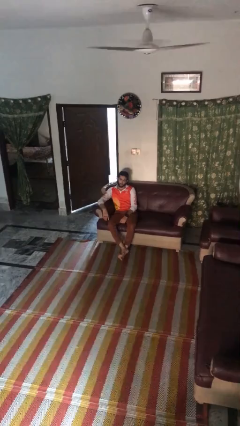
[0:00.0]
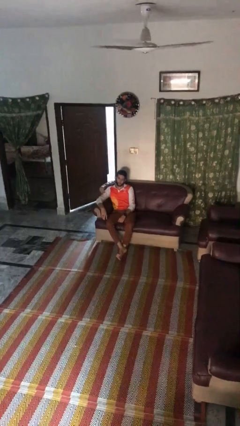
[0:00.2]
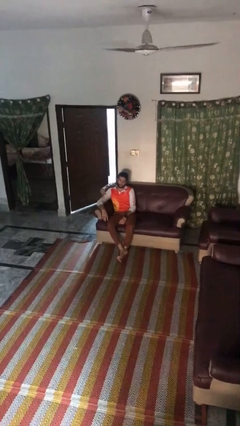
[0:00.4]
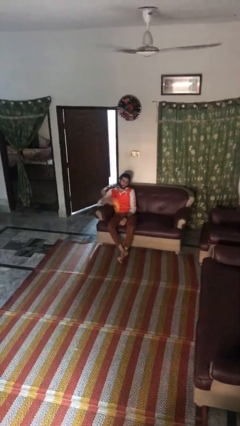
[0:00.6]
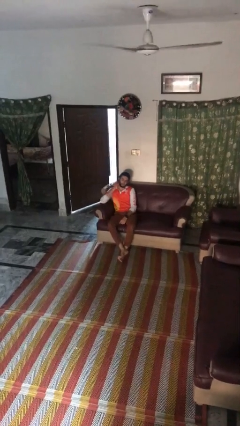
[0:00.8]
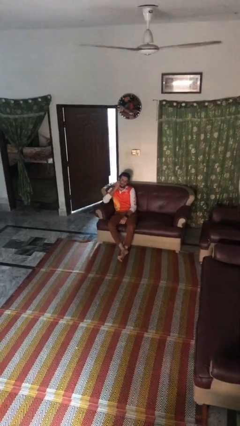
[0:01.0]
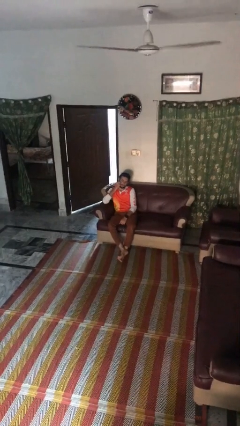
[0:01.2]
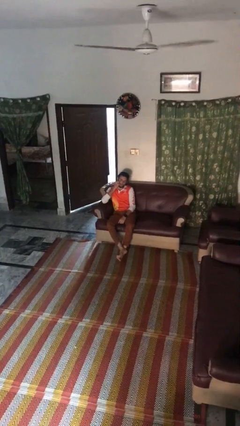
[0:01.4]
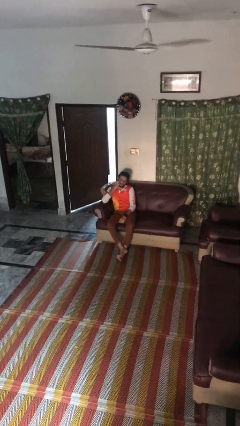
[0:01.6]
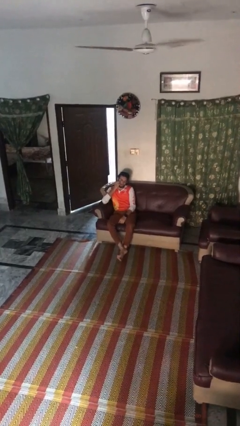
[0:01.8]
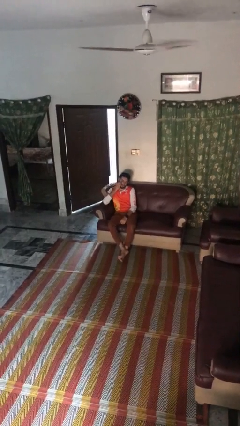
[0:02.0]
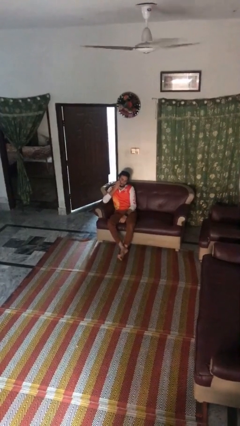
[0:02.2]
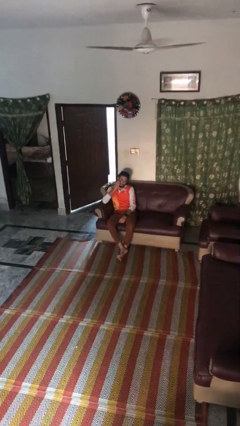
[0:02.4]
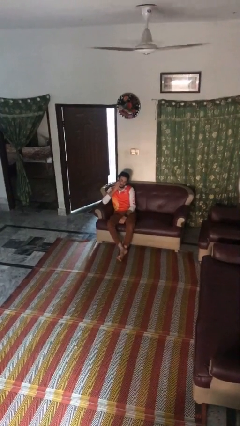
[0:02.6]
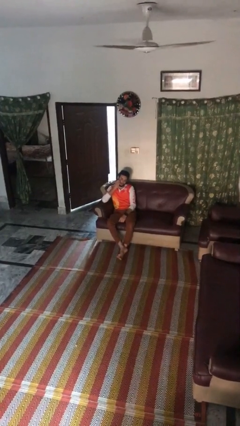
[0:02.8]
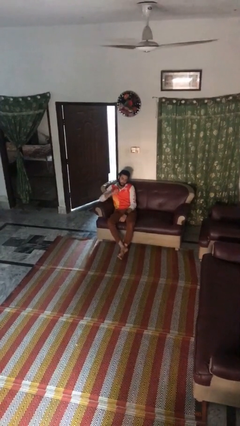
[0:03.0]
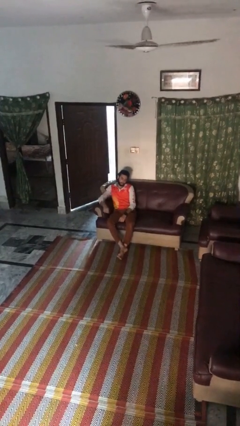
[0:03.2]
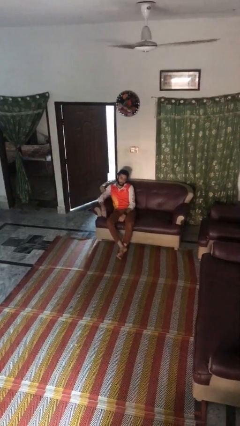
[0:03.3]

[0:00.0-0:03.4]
person scratches face

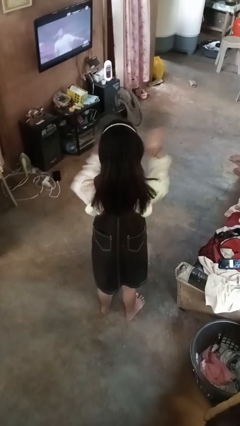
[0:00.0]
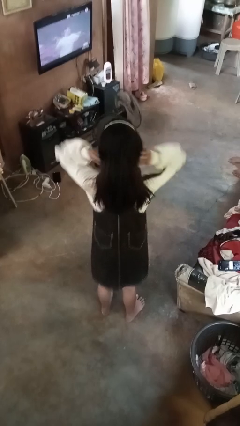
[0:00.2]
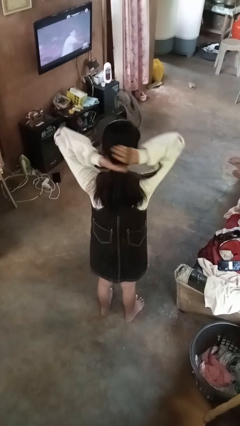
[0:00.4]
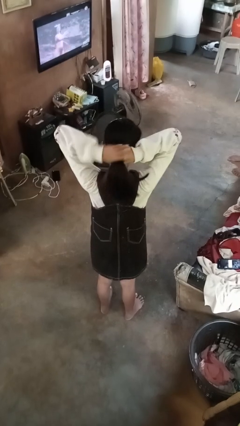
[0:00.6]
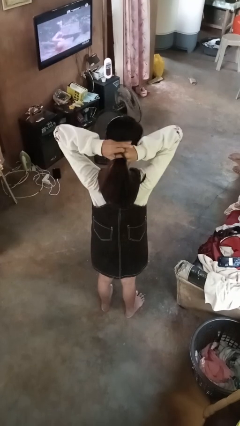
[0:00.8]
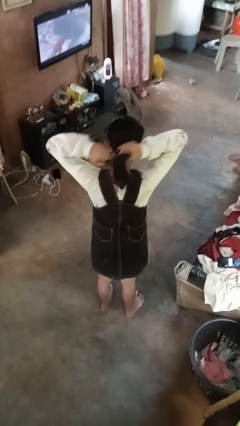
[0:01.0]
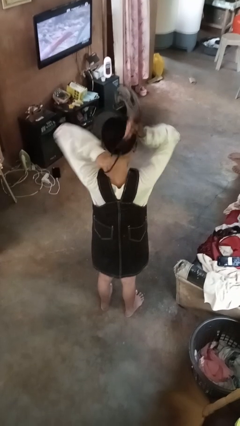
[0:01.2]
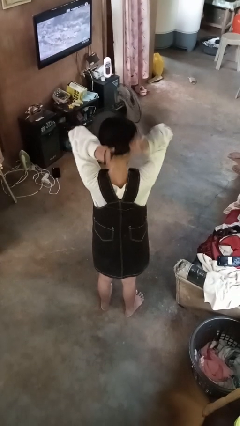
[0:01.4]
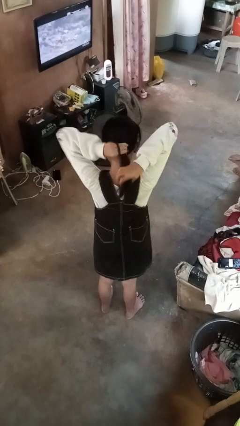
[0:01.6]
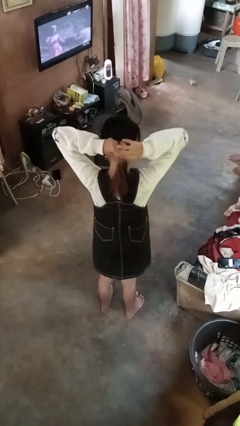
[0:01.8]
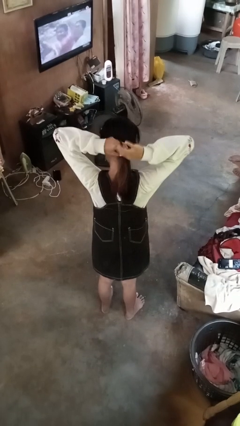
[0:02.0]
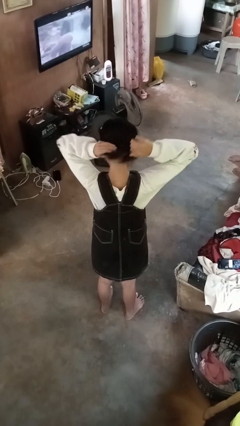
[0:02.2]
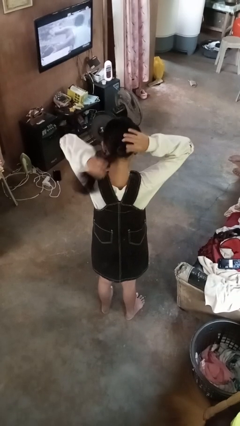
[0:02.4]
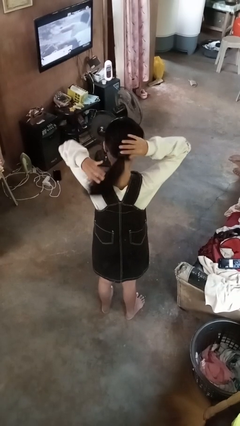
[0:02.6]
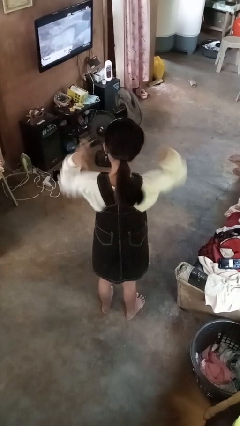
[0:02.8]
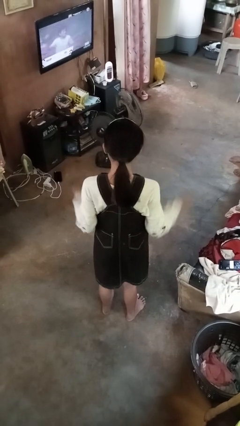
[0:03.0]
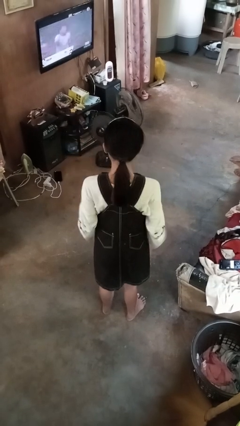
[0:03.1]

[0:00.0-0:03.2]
person puts hair in ponytail

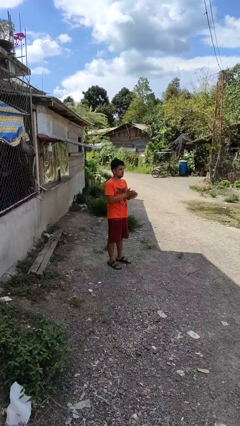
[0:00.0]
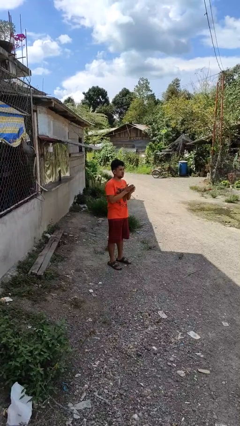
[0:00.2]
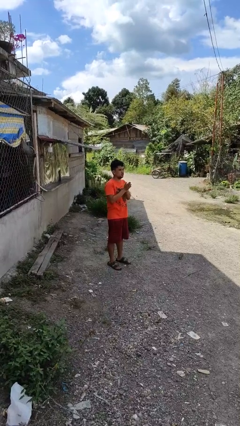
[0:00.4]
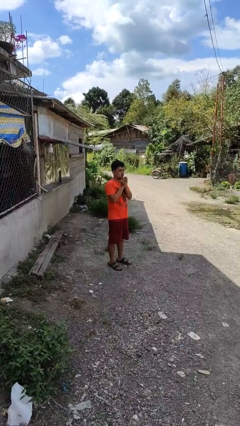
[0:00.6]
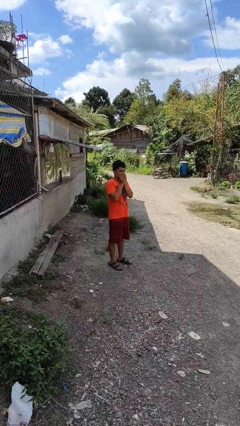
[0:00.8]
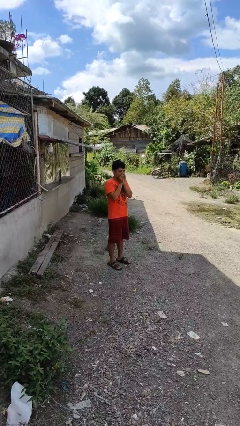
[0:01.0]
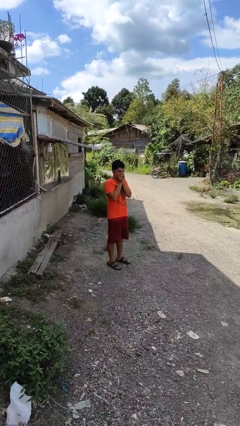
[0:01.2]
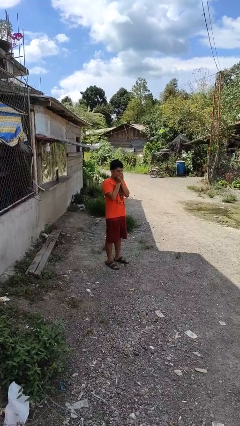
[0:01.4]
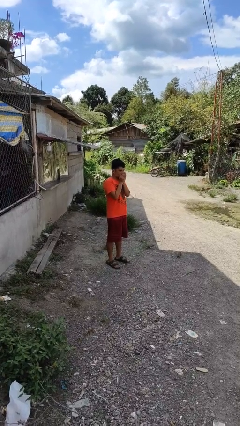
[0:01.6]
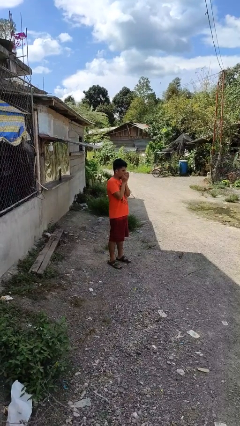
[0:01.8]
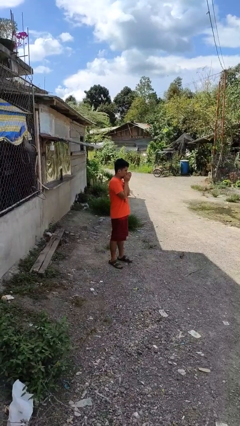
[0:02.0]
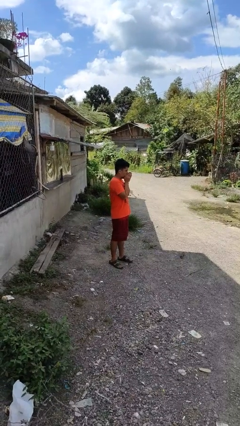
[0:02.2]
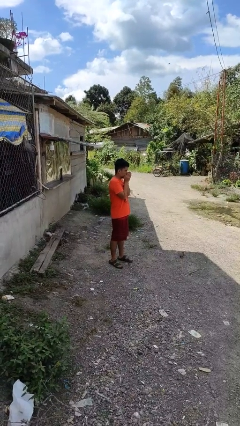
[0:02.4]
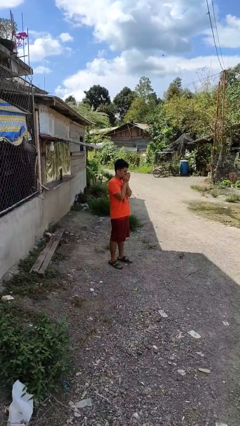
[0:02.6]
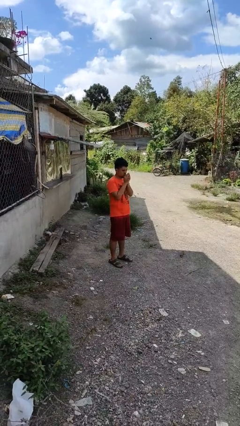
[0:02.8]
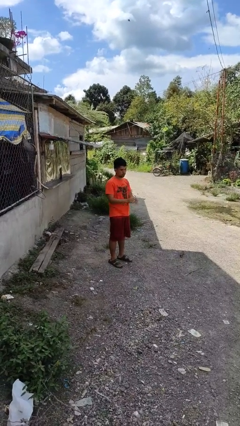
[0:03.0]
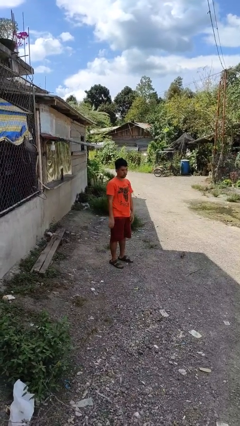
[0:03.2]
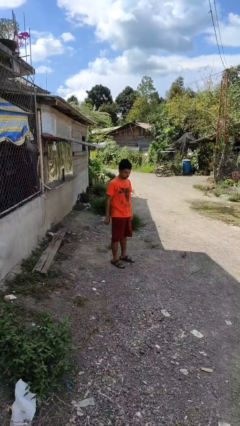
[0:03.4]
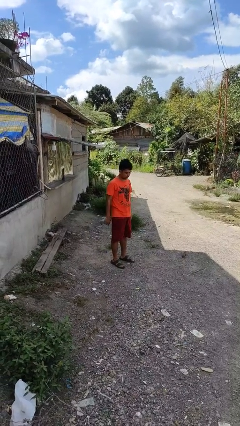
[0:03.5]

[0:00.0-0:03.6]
person blows into hands

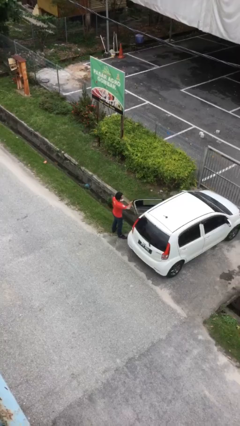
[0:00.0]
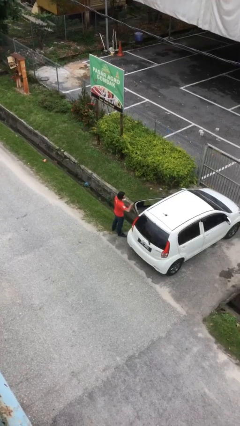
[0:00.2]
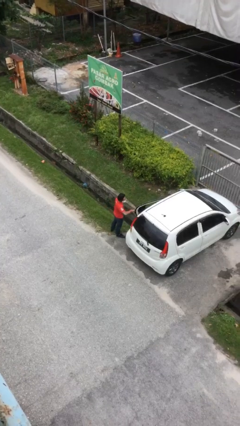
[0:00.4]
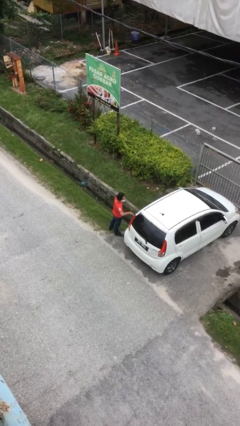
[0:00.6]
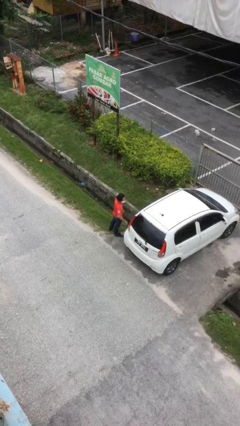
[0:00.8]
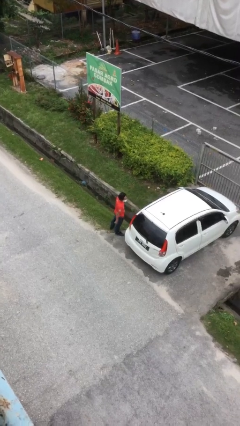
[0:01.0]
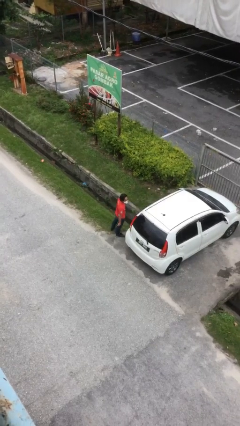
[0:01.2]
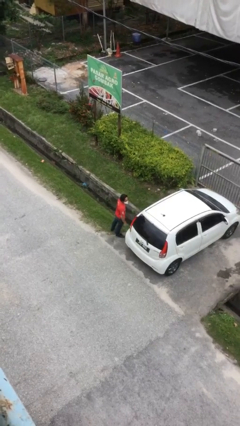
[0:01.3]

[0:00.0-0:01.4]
person closes car door

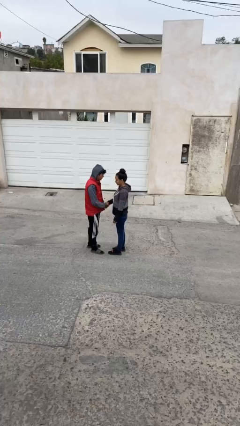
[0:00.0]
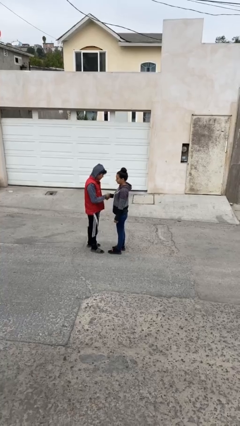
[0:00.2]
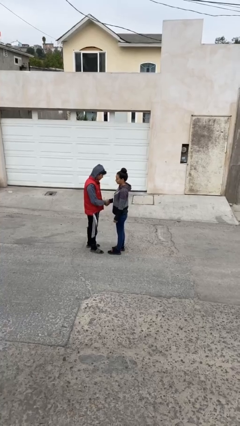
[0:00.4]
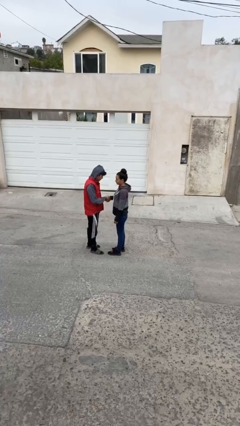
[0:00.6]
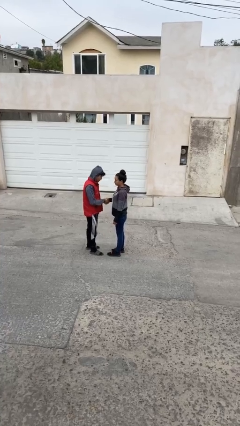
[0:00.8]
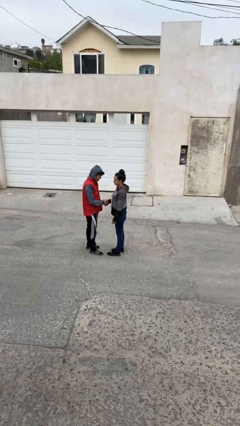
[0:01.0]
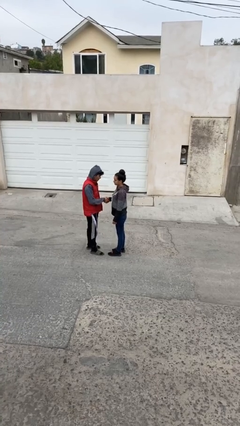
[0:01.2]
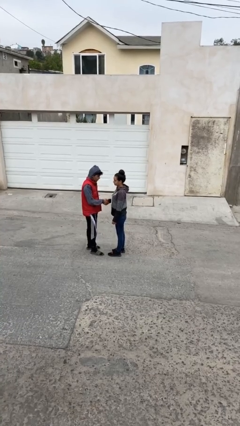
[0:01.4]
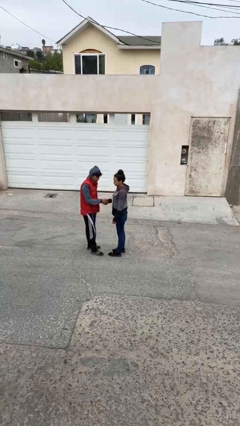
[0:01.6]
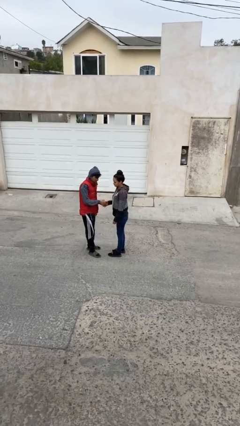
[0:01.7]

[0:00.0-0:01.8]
person shakes hand

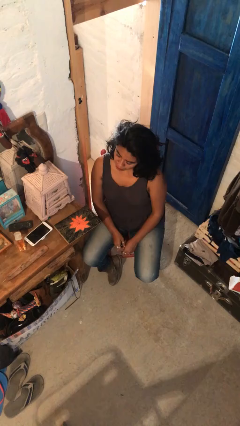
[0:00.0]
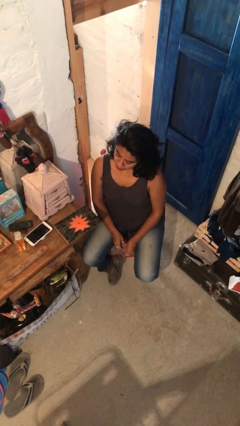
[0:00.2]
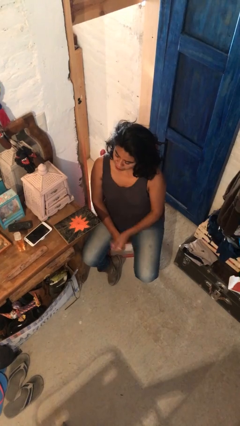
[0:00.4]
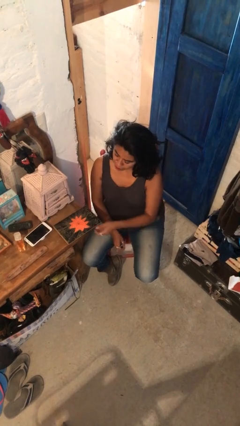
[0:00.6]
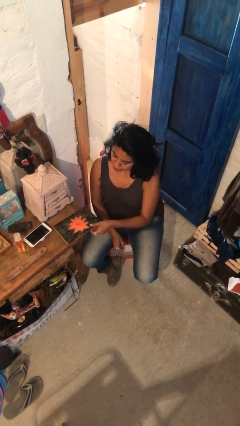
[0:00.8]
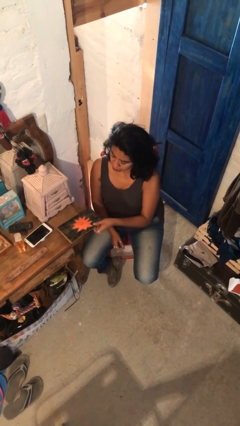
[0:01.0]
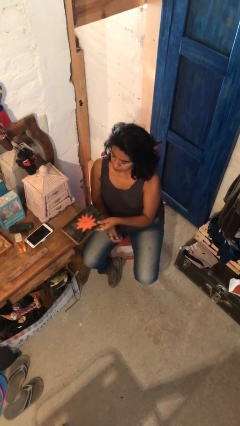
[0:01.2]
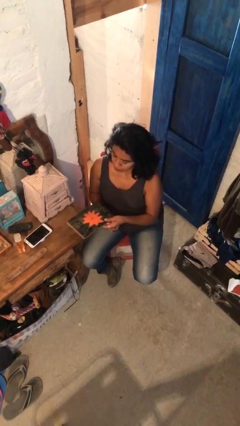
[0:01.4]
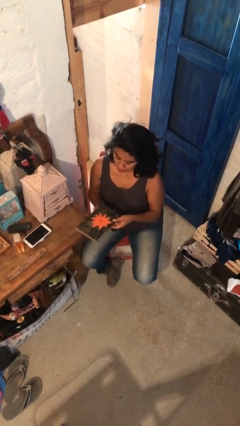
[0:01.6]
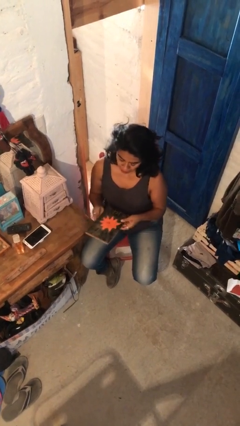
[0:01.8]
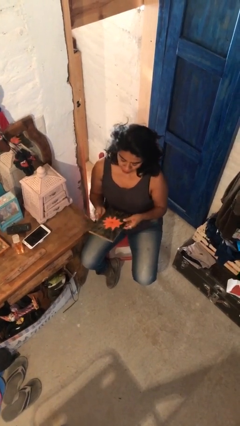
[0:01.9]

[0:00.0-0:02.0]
person picks up object from table

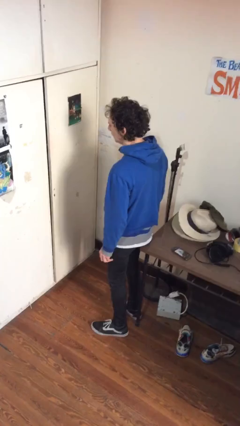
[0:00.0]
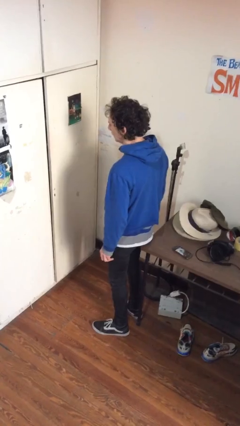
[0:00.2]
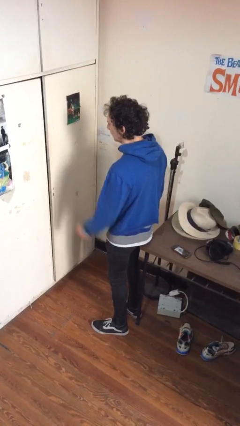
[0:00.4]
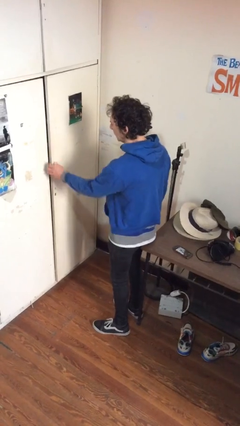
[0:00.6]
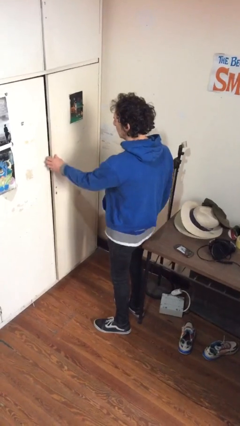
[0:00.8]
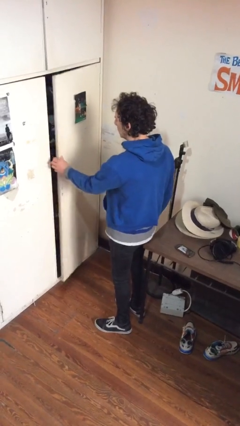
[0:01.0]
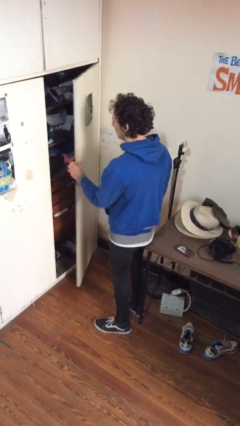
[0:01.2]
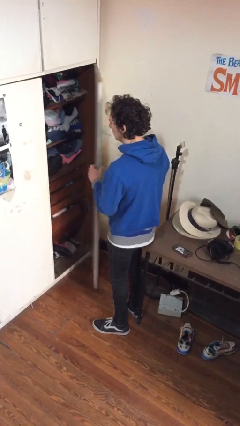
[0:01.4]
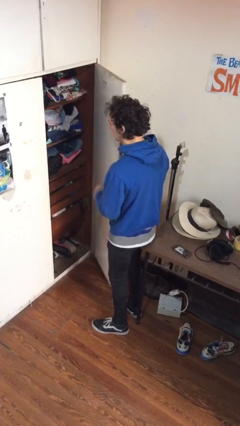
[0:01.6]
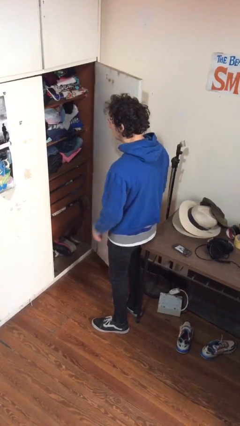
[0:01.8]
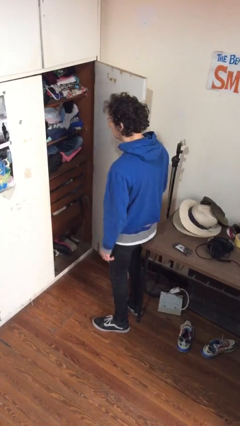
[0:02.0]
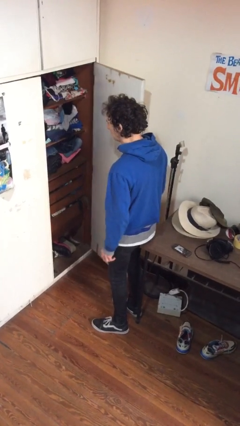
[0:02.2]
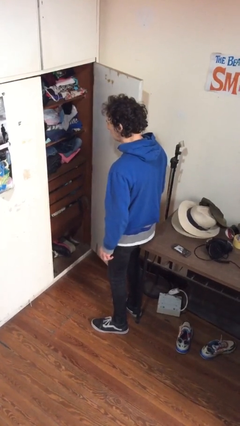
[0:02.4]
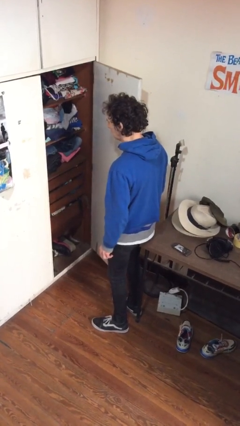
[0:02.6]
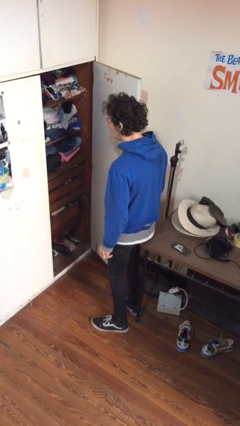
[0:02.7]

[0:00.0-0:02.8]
person opens closet door
